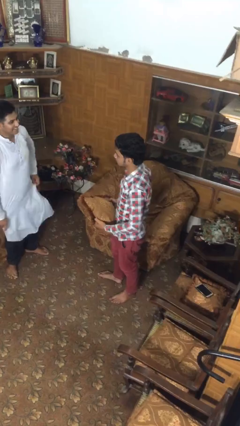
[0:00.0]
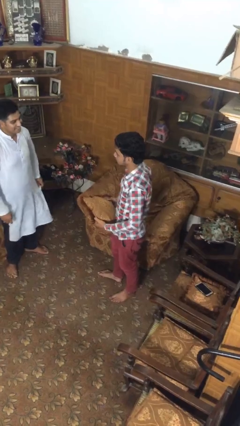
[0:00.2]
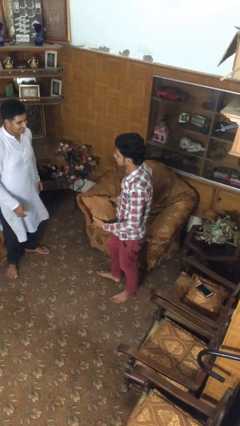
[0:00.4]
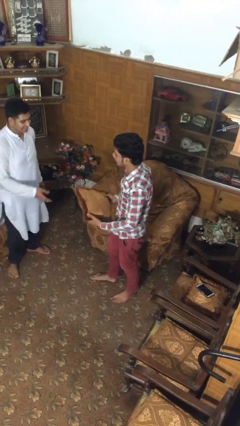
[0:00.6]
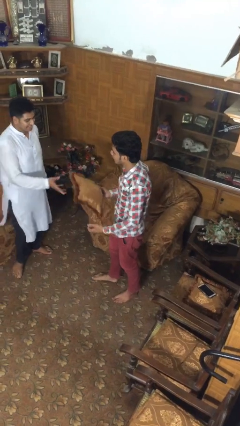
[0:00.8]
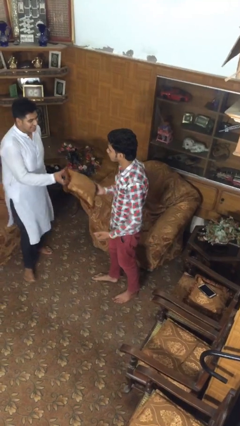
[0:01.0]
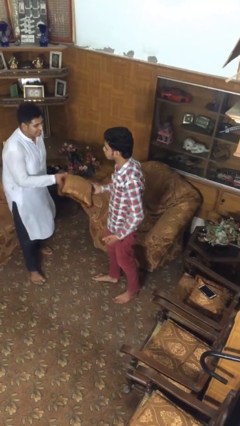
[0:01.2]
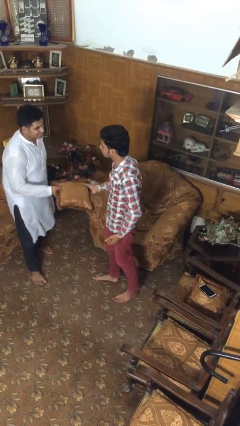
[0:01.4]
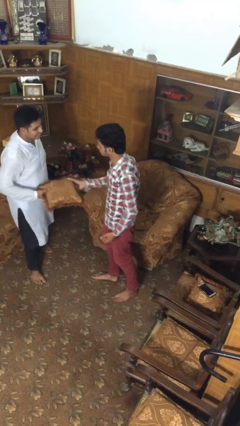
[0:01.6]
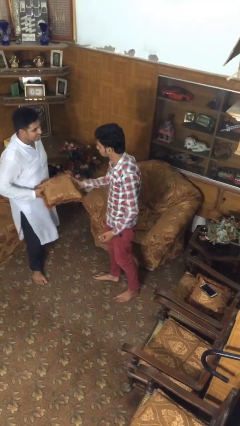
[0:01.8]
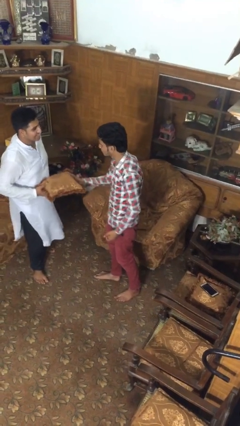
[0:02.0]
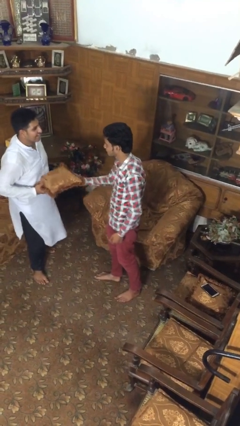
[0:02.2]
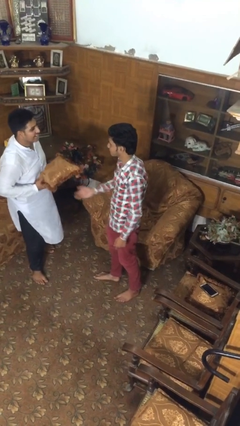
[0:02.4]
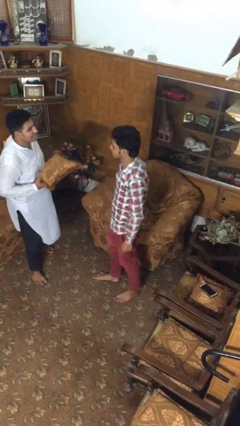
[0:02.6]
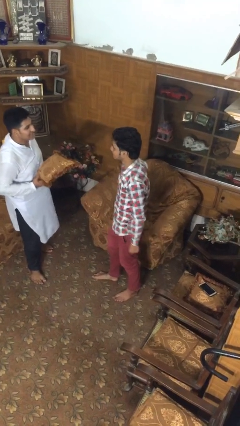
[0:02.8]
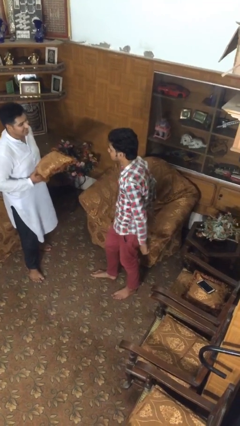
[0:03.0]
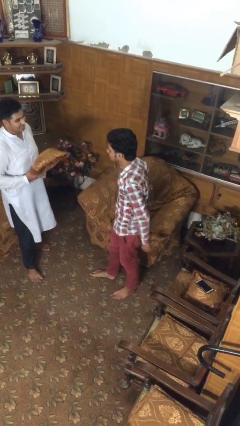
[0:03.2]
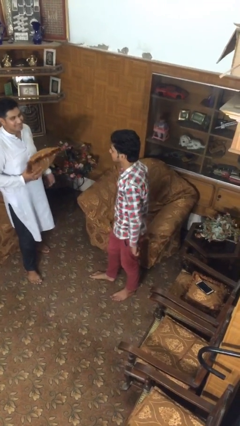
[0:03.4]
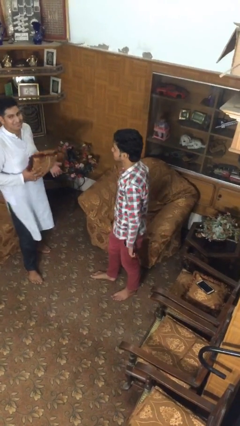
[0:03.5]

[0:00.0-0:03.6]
person transfers object to person

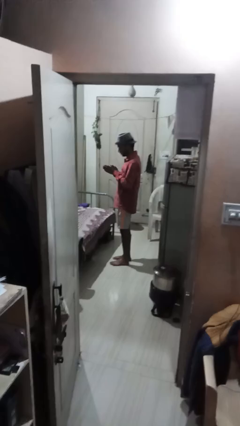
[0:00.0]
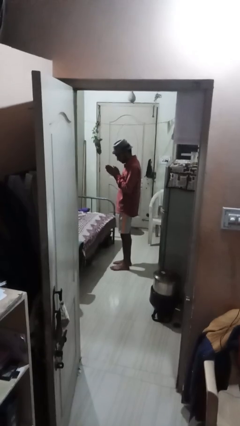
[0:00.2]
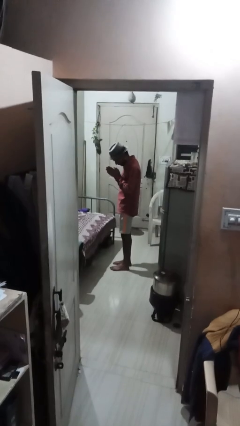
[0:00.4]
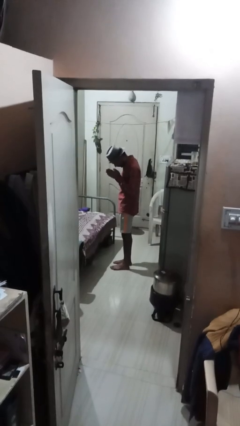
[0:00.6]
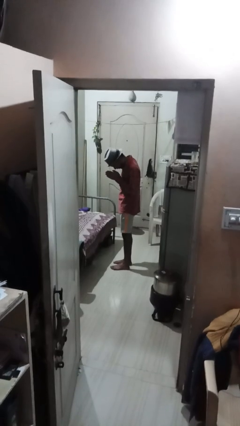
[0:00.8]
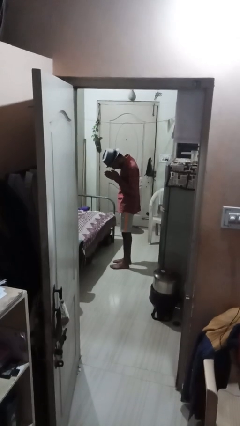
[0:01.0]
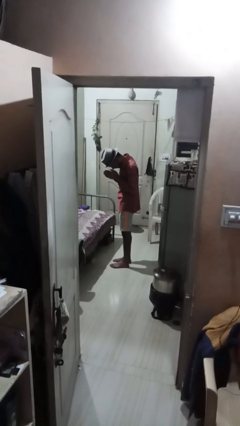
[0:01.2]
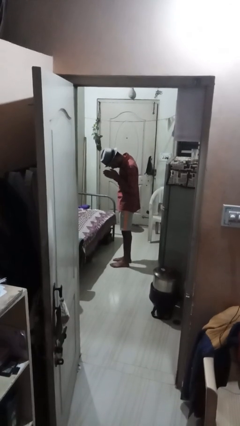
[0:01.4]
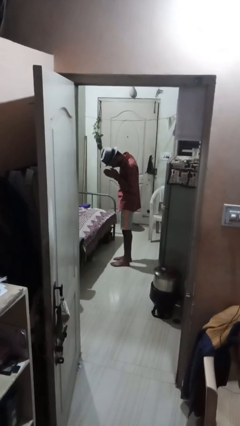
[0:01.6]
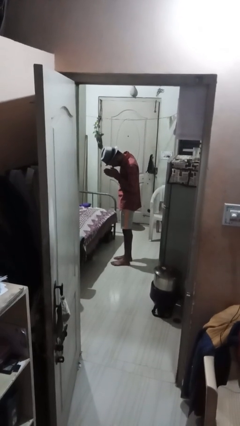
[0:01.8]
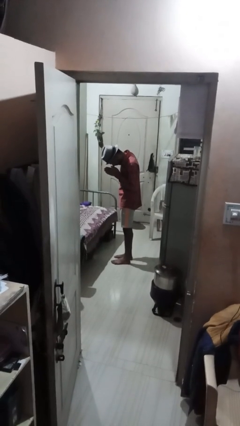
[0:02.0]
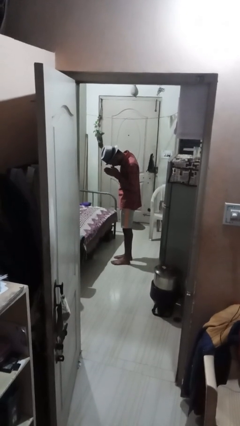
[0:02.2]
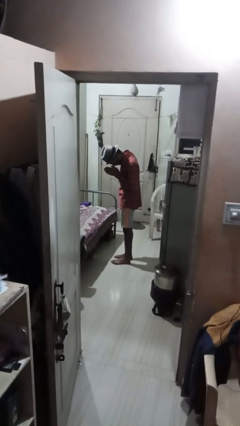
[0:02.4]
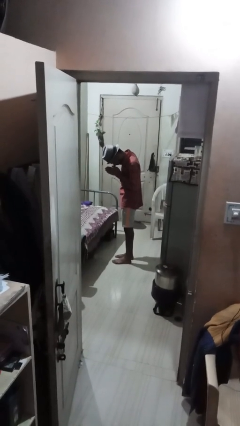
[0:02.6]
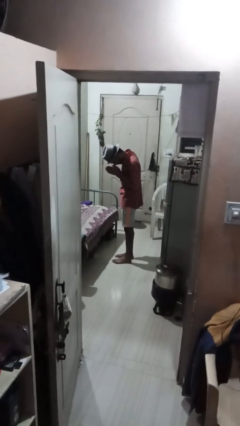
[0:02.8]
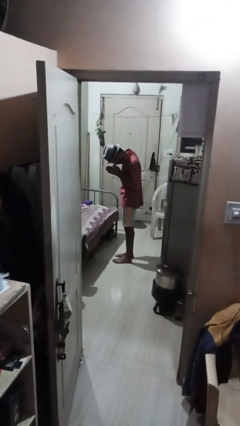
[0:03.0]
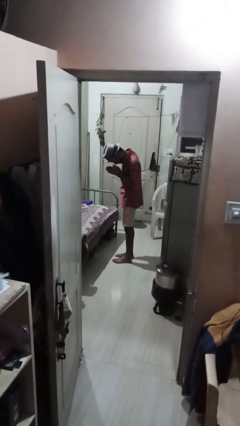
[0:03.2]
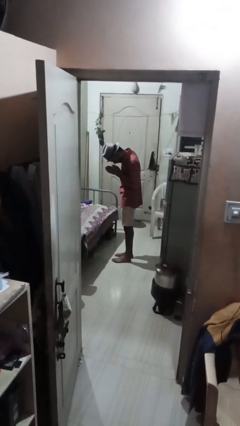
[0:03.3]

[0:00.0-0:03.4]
person prays

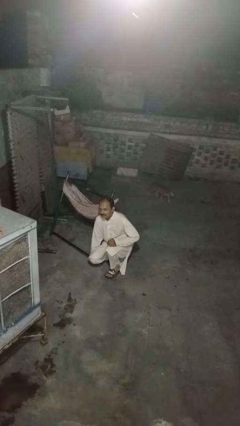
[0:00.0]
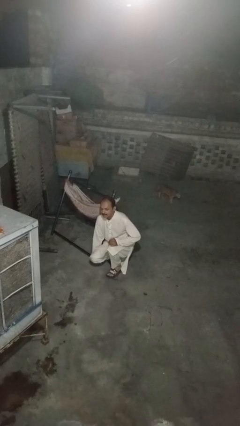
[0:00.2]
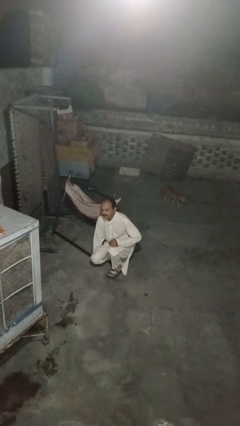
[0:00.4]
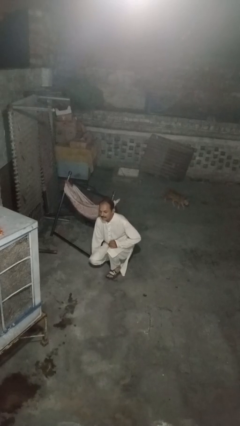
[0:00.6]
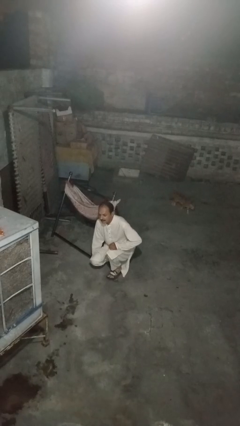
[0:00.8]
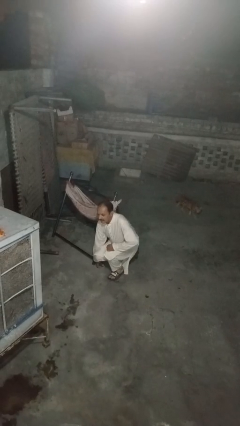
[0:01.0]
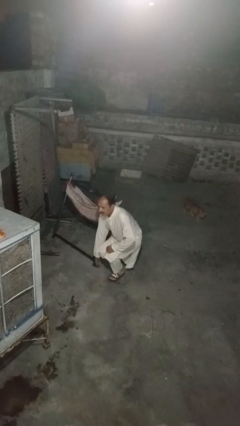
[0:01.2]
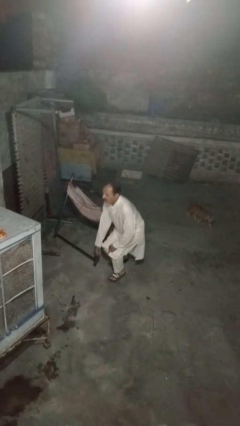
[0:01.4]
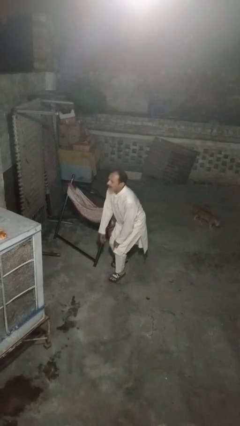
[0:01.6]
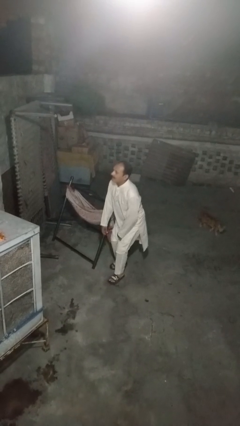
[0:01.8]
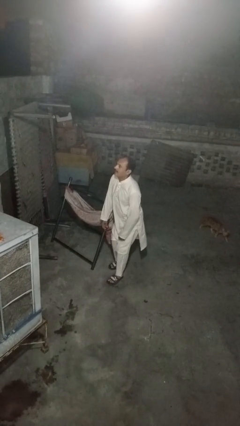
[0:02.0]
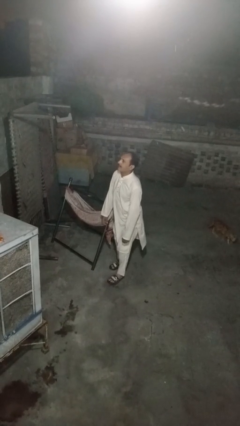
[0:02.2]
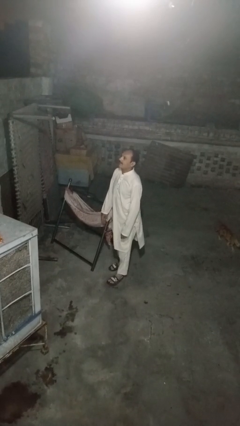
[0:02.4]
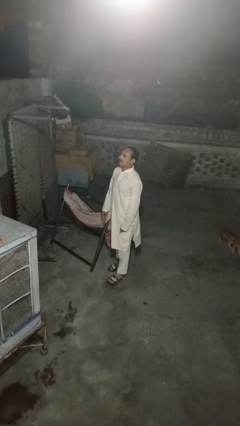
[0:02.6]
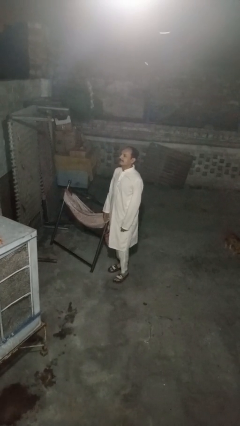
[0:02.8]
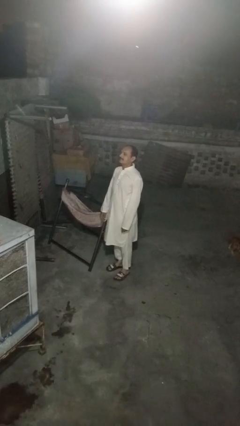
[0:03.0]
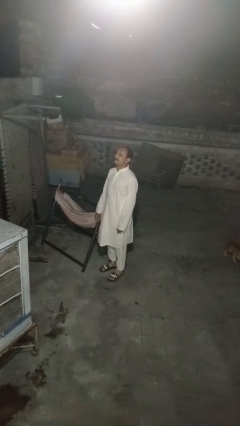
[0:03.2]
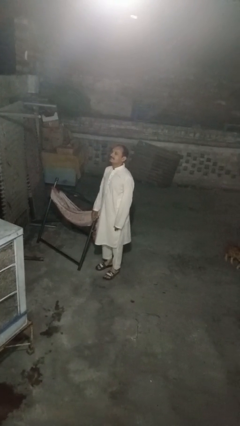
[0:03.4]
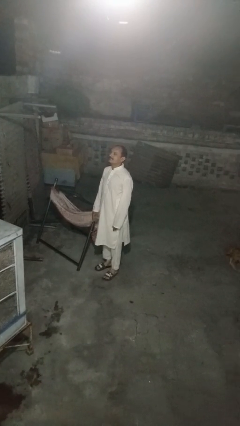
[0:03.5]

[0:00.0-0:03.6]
person stands up from floor

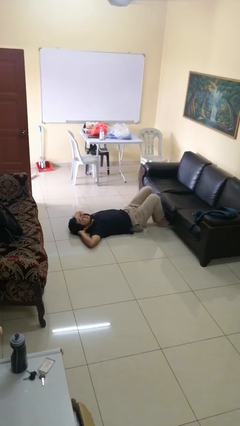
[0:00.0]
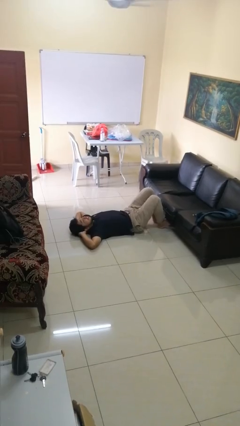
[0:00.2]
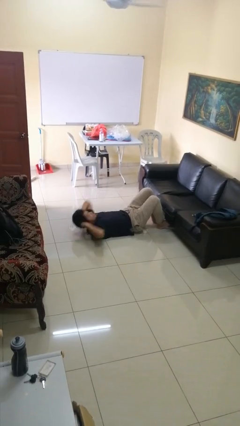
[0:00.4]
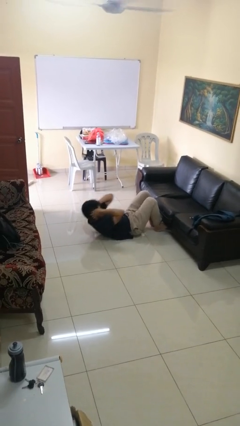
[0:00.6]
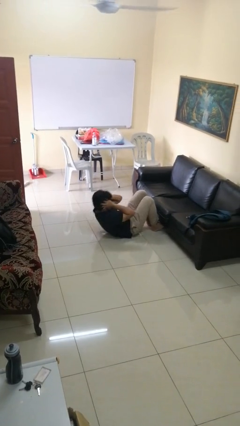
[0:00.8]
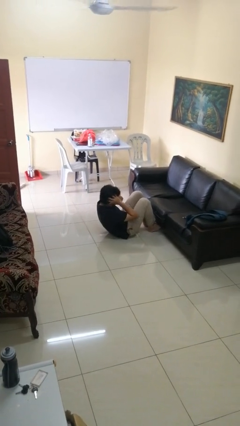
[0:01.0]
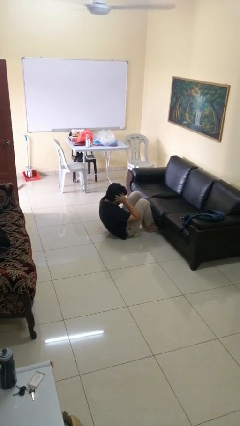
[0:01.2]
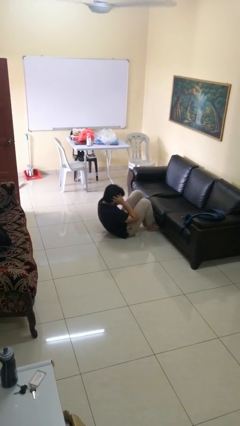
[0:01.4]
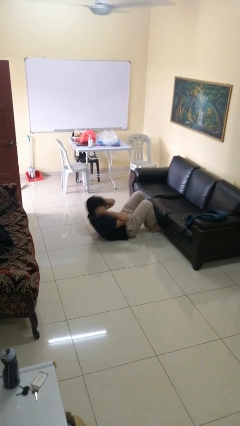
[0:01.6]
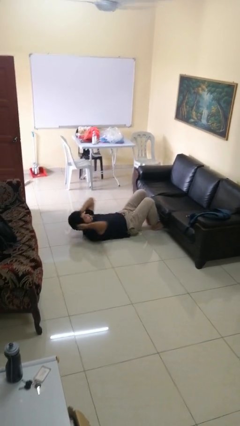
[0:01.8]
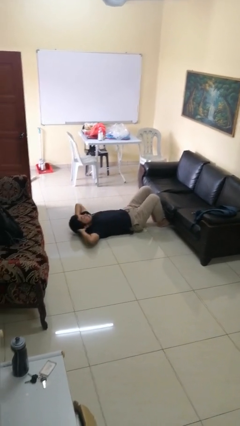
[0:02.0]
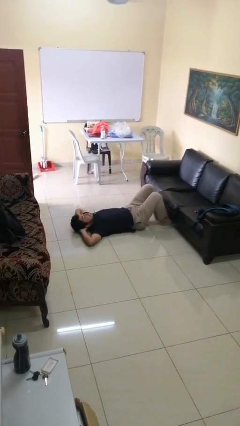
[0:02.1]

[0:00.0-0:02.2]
person exercises with situp

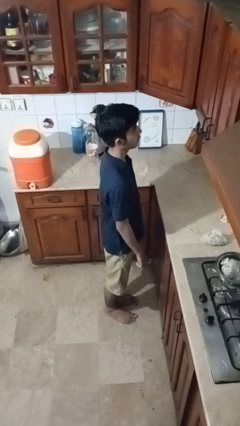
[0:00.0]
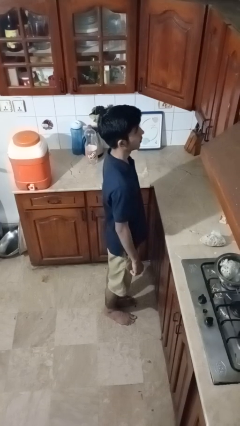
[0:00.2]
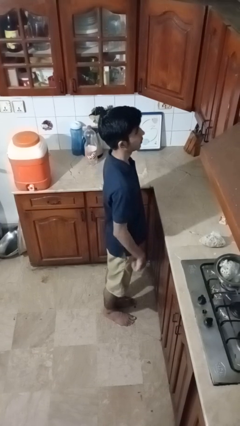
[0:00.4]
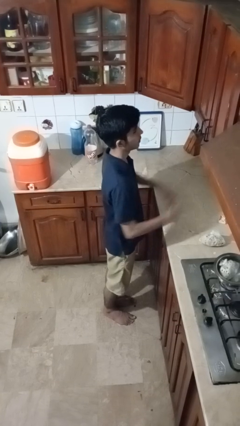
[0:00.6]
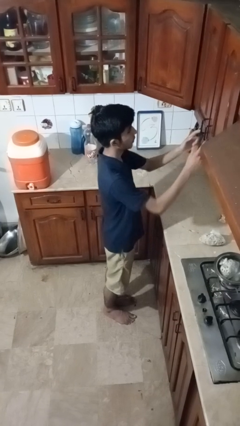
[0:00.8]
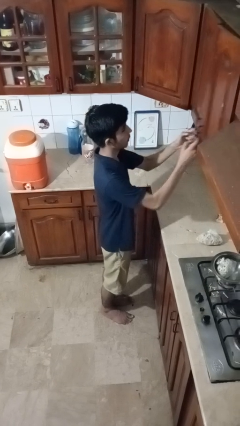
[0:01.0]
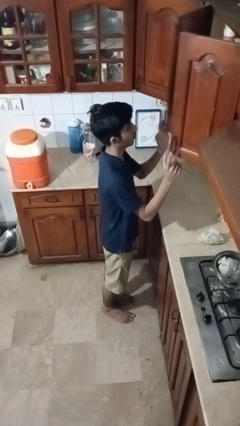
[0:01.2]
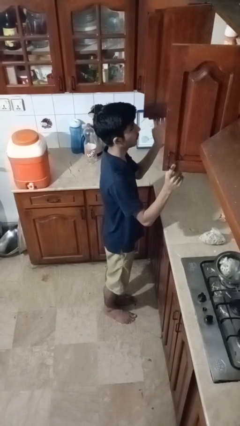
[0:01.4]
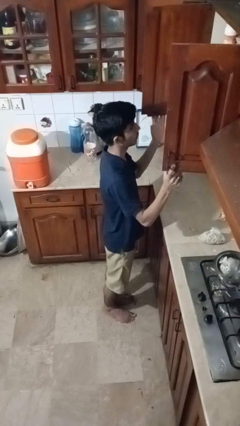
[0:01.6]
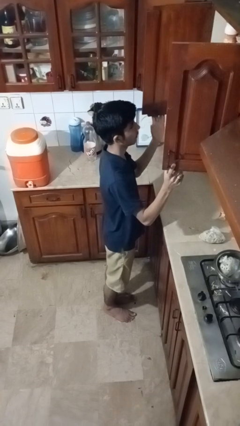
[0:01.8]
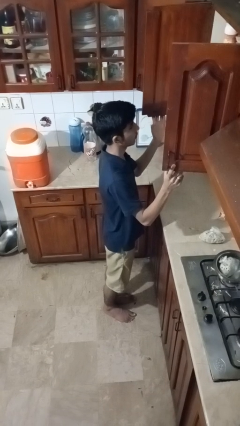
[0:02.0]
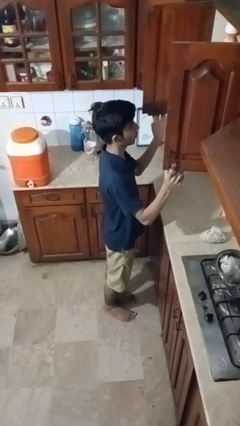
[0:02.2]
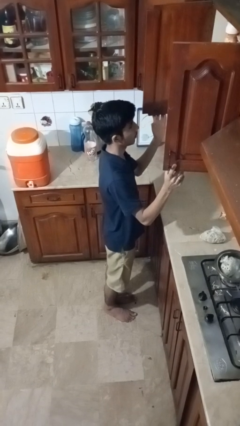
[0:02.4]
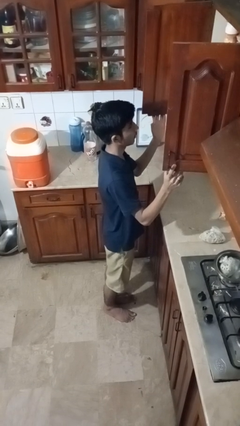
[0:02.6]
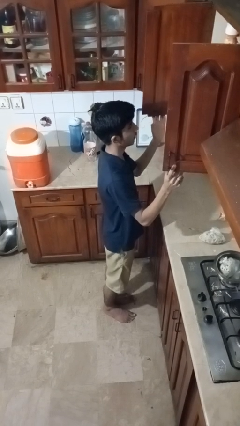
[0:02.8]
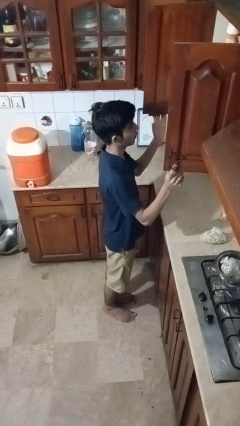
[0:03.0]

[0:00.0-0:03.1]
person opens cabinet

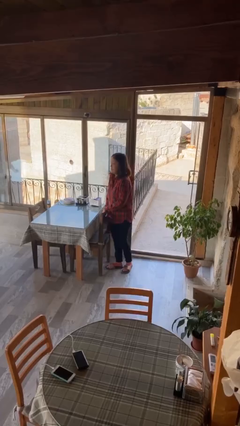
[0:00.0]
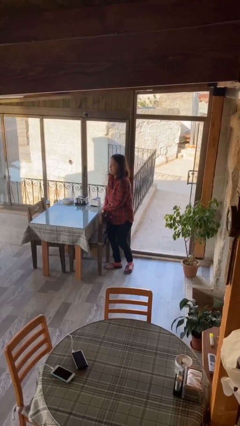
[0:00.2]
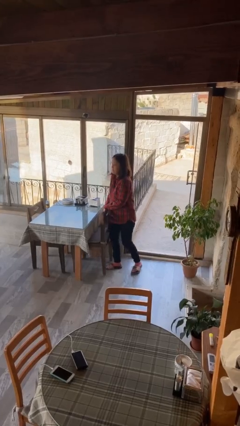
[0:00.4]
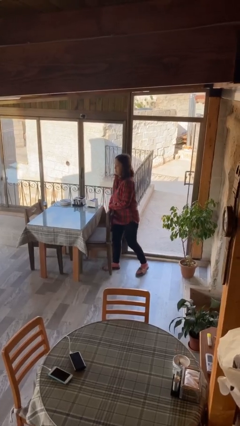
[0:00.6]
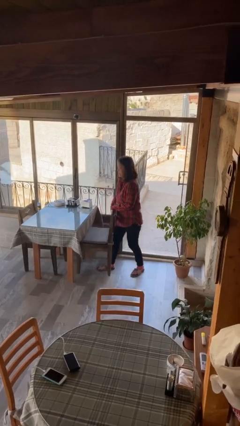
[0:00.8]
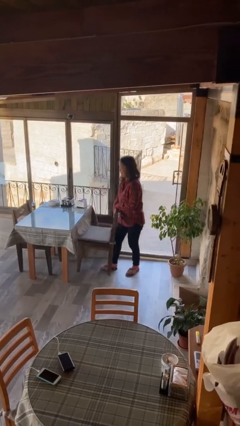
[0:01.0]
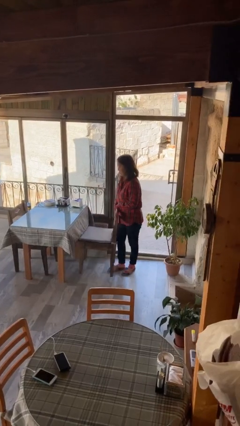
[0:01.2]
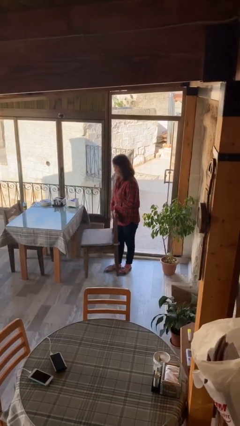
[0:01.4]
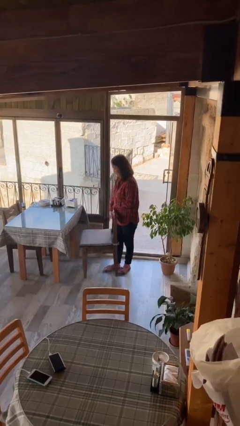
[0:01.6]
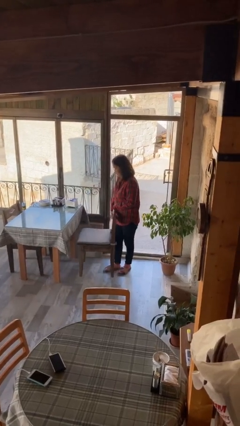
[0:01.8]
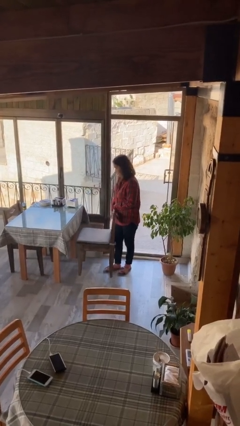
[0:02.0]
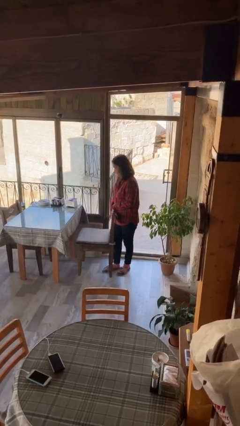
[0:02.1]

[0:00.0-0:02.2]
person pulls out chair
